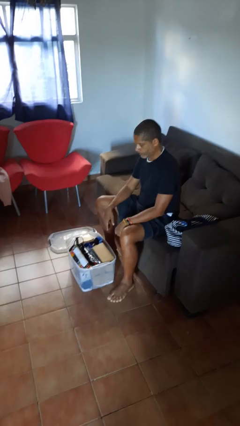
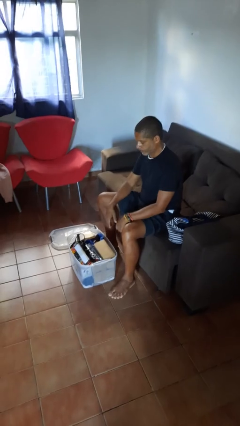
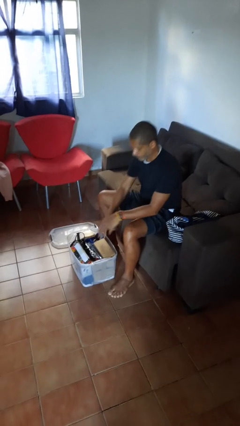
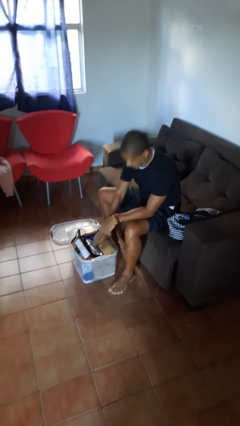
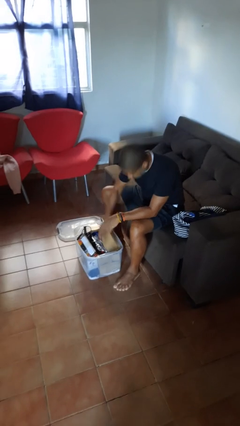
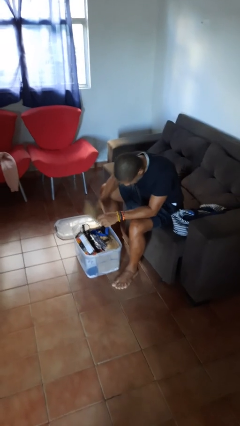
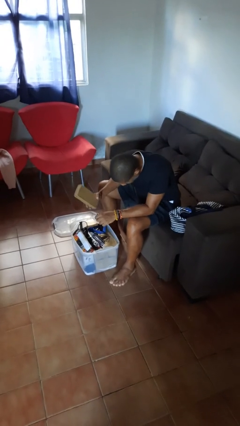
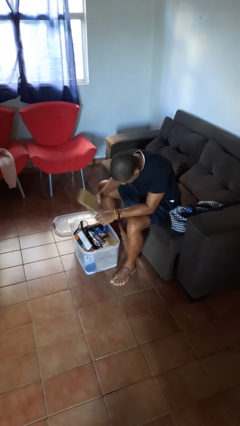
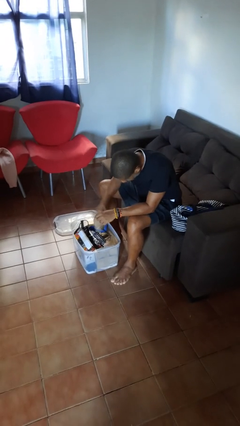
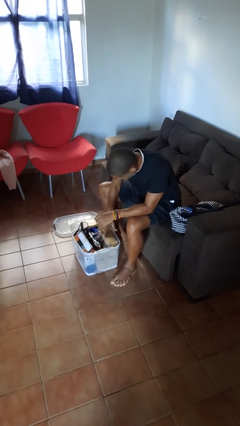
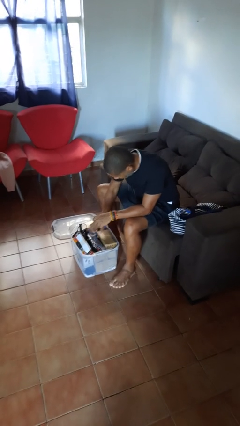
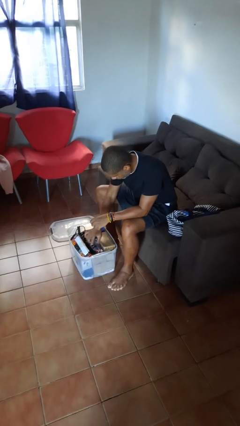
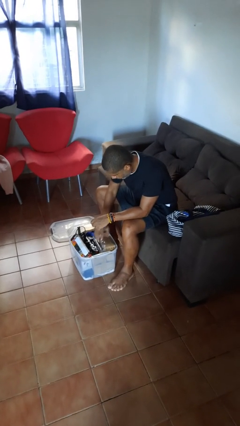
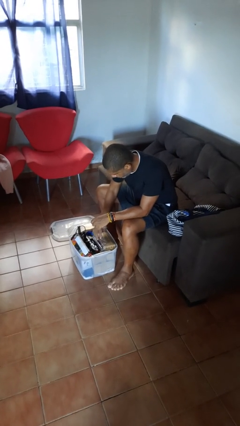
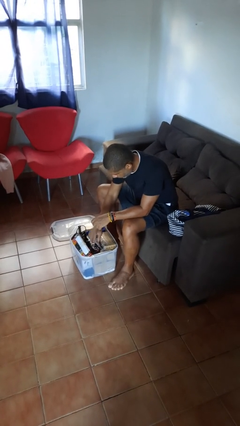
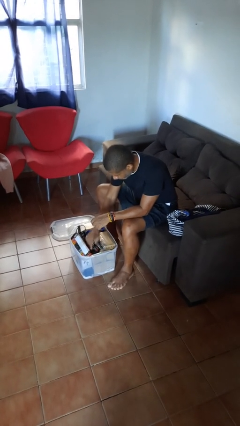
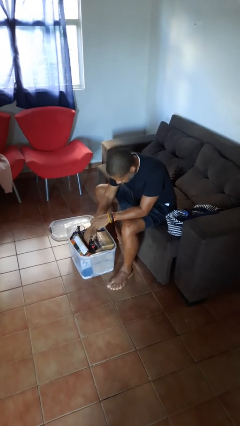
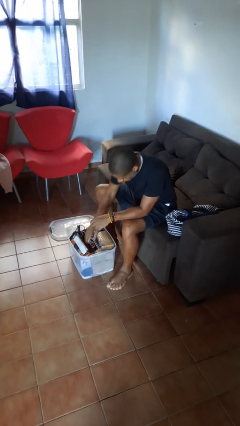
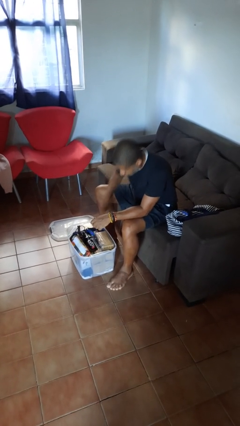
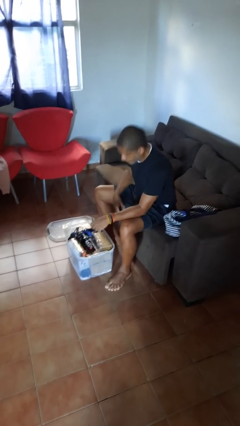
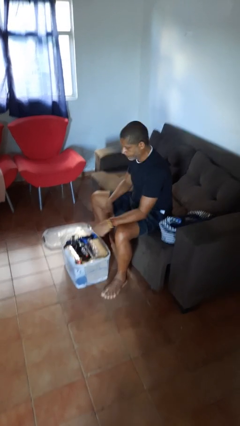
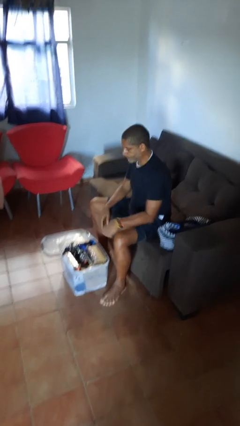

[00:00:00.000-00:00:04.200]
person searches in box

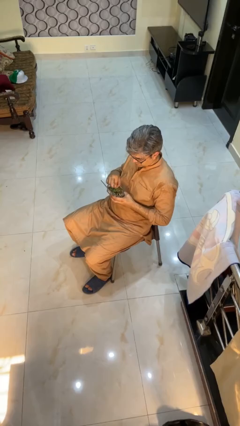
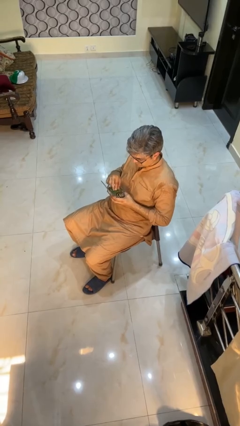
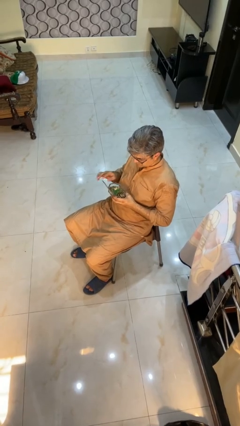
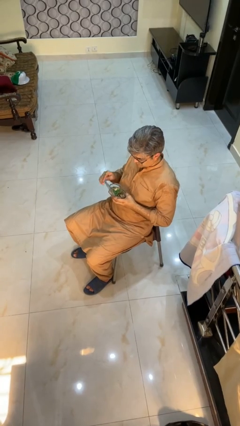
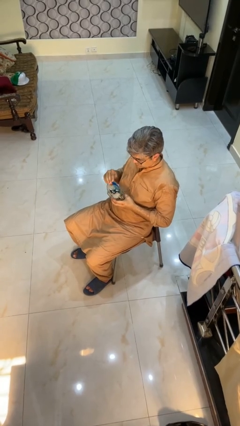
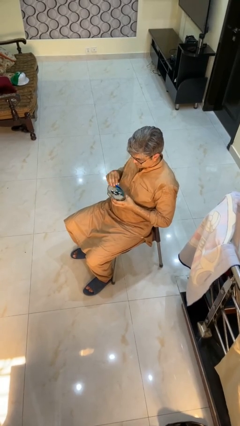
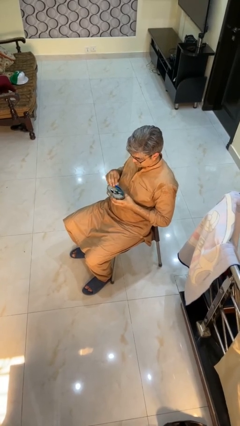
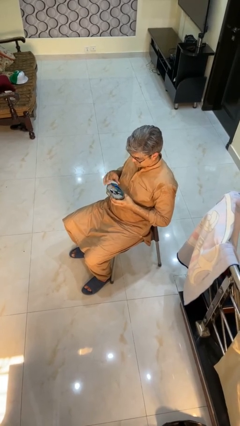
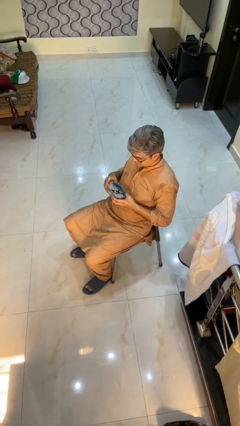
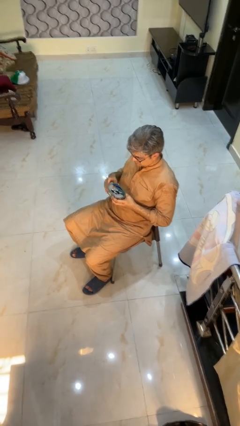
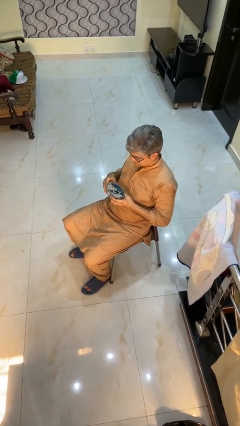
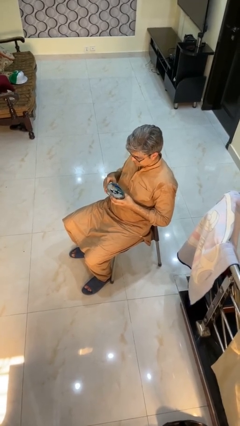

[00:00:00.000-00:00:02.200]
person closes jewelry box

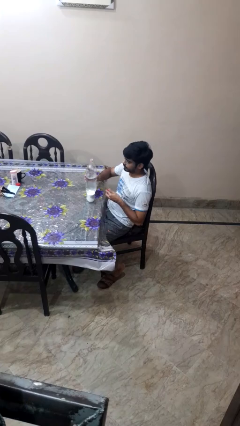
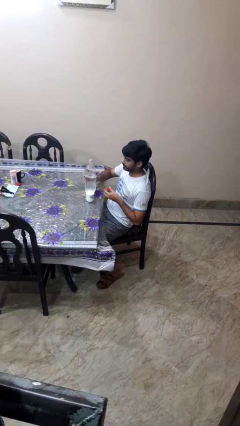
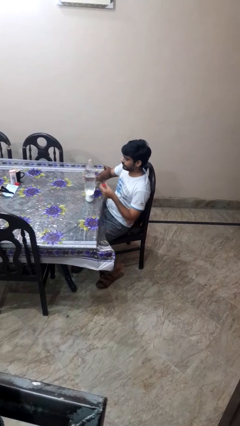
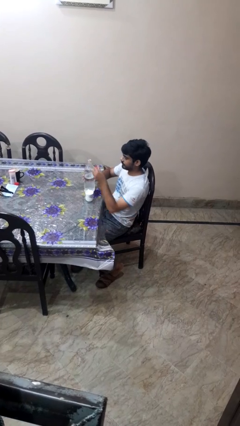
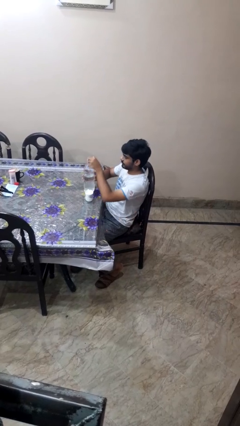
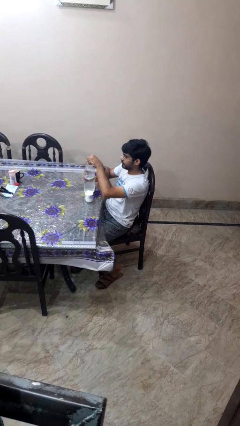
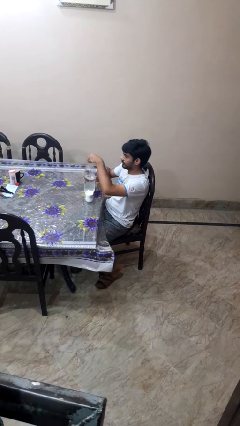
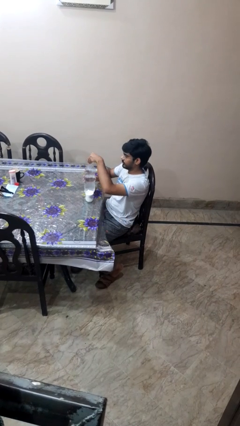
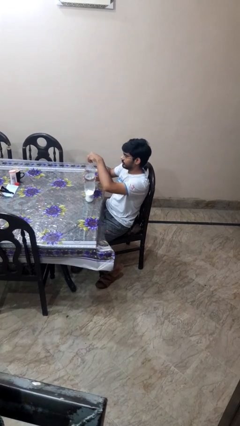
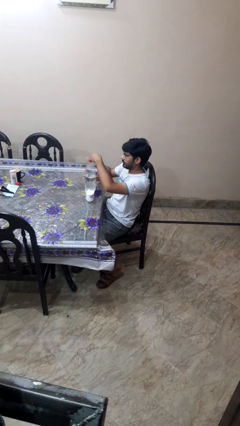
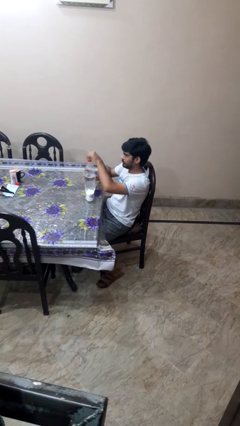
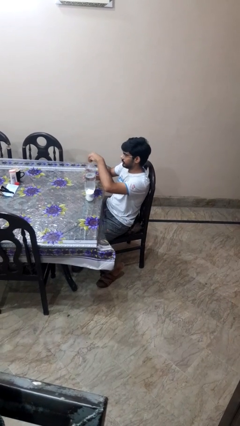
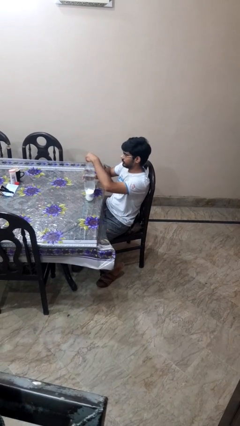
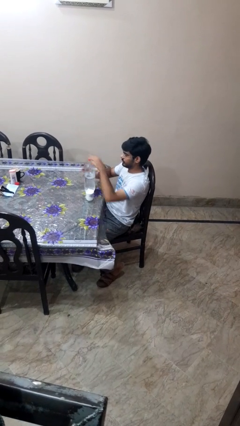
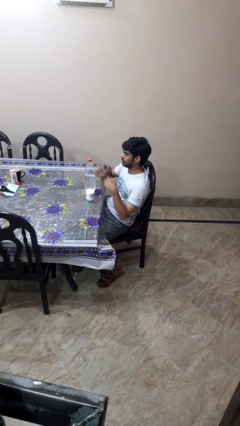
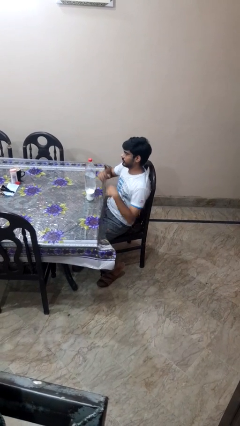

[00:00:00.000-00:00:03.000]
person screws lid to bottle

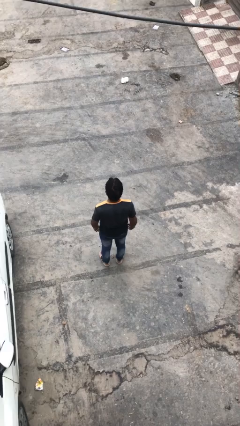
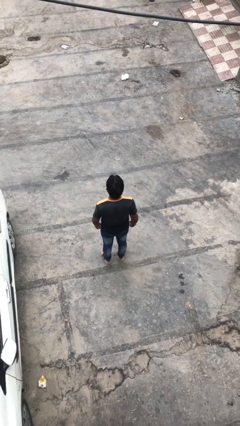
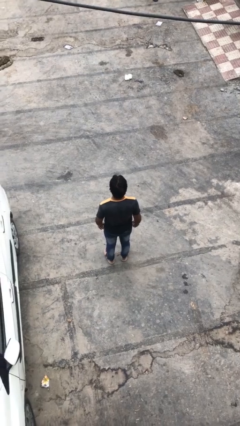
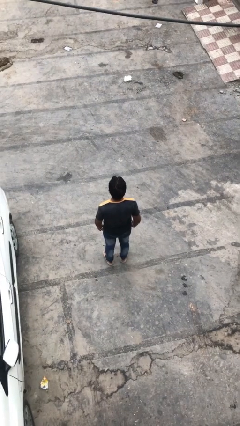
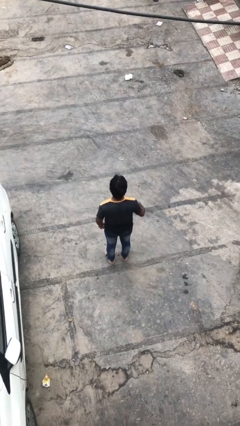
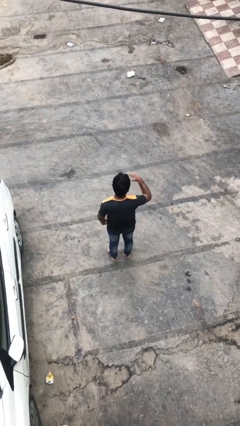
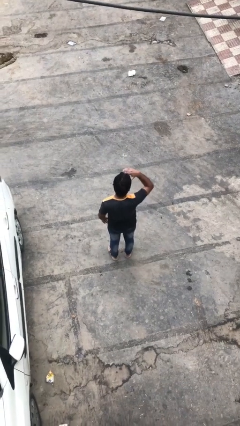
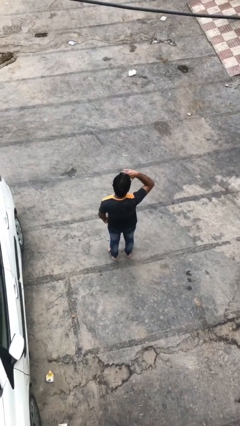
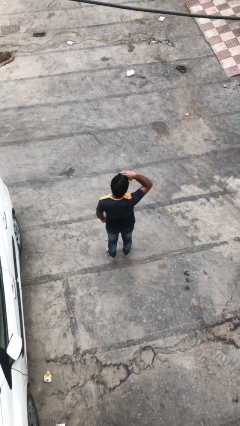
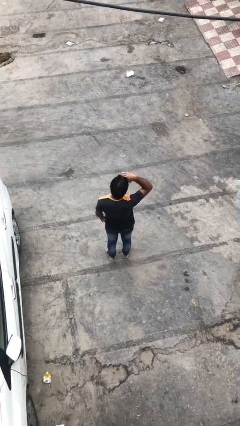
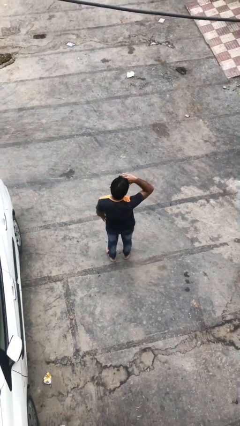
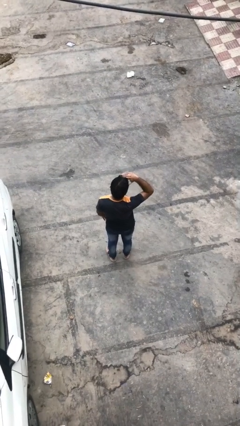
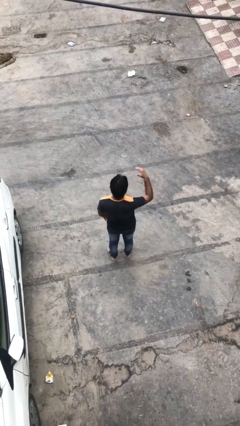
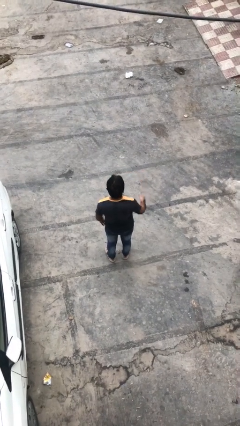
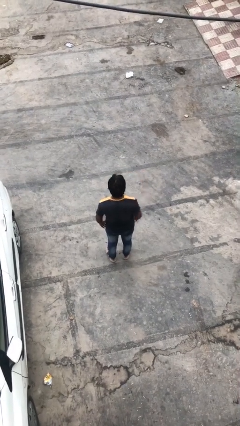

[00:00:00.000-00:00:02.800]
person shades eyes

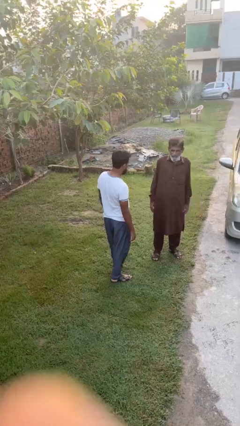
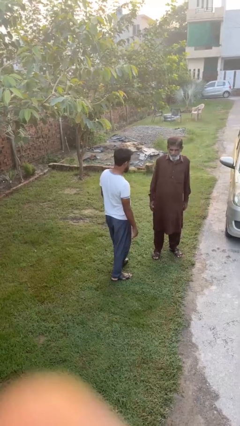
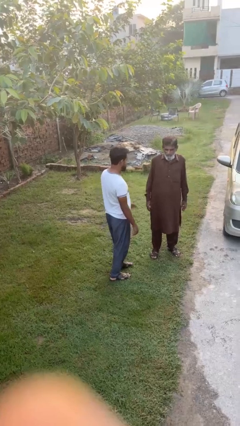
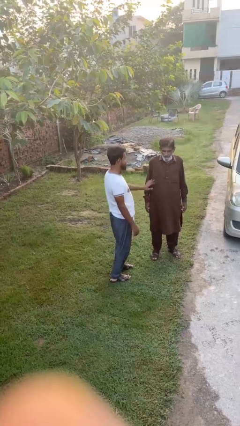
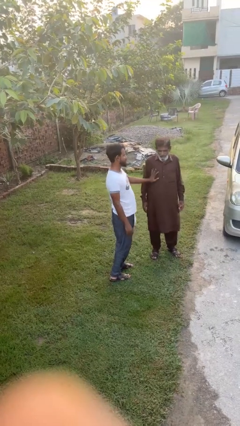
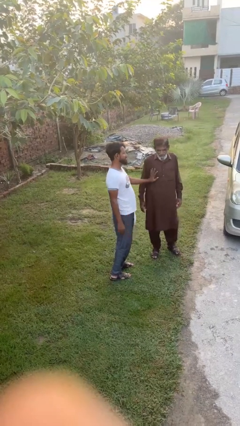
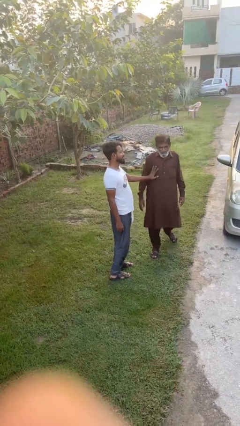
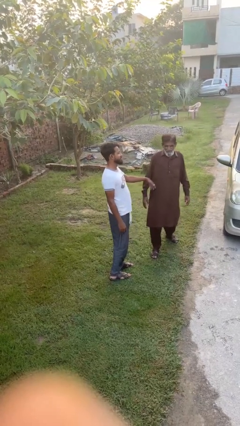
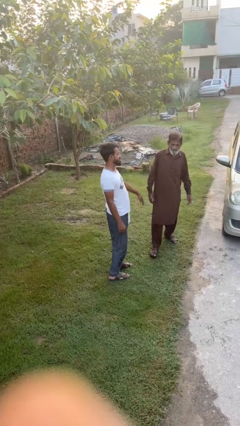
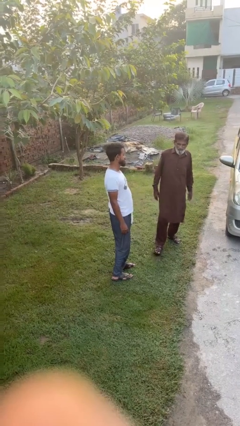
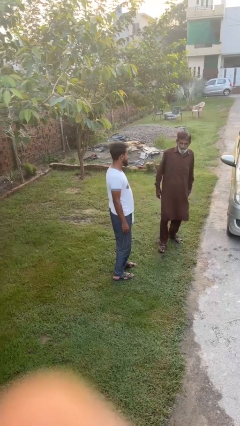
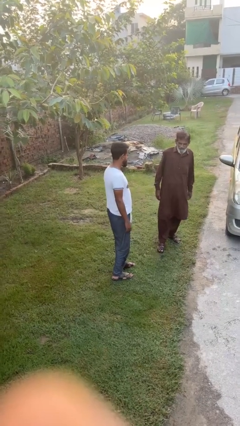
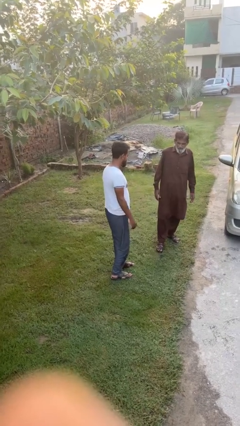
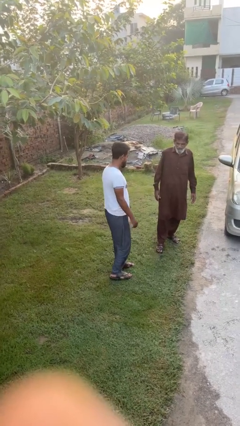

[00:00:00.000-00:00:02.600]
person shoves person

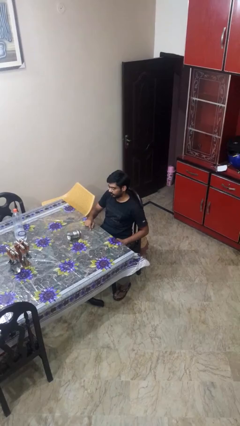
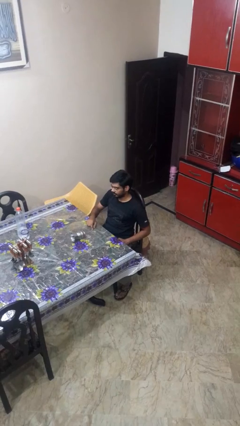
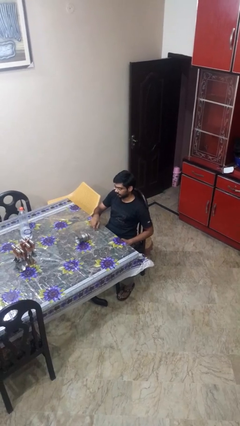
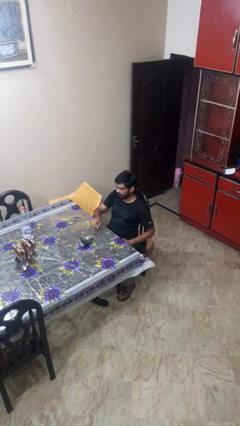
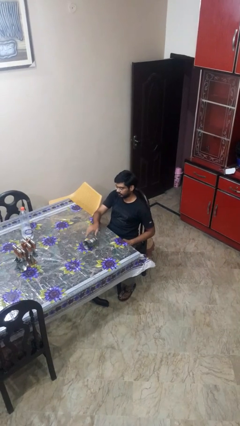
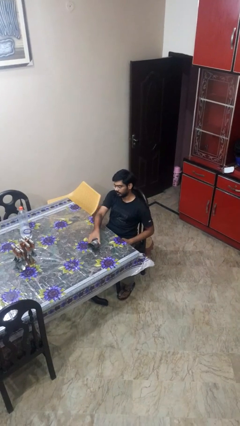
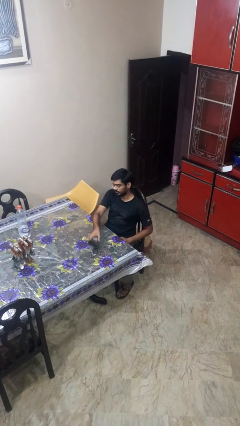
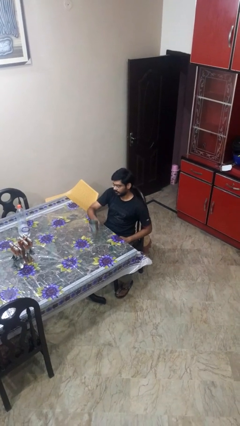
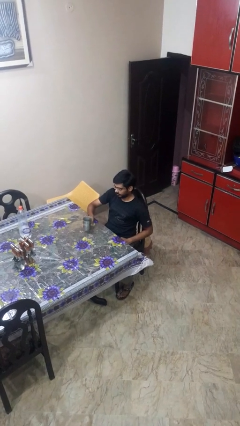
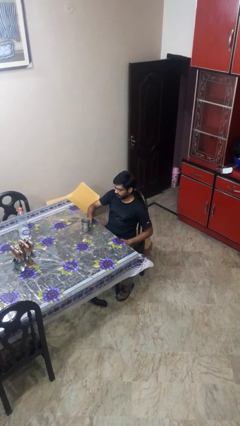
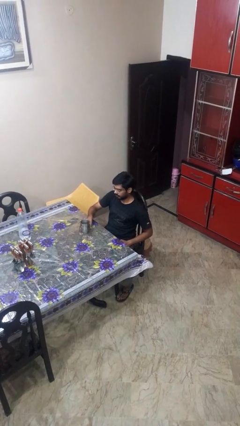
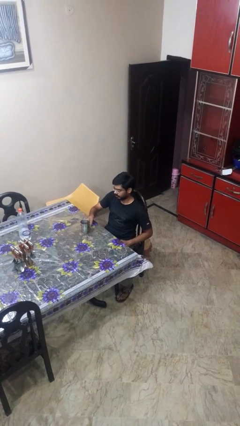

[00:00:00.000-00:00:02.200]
person sets upright glass

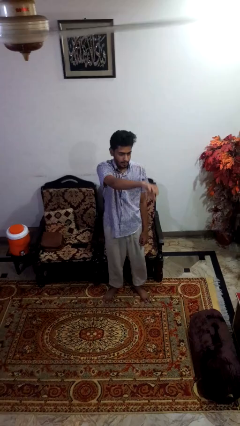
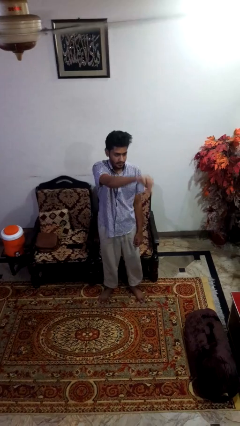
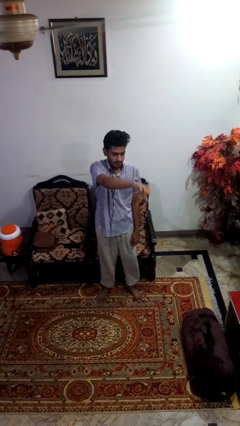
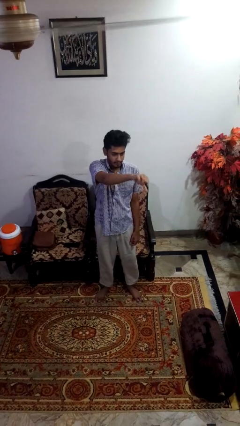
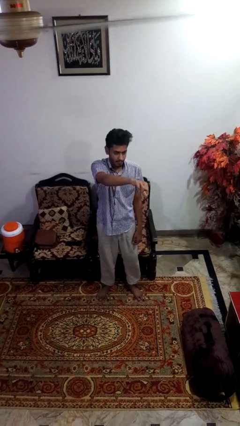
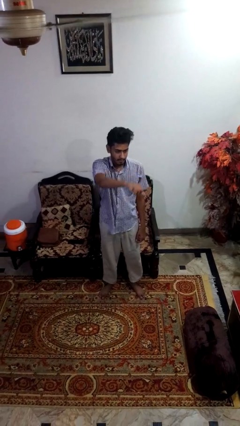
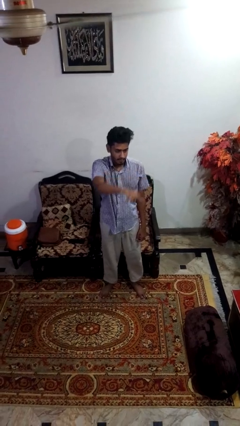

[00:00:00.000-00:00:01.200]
person gestures thumbs down
